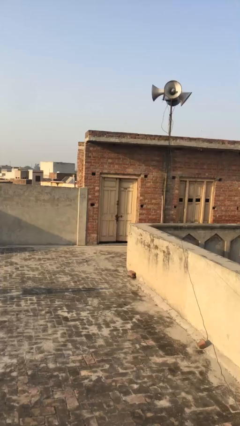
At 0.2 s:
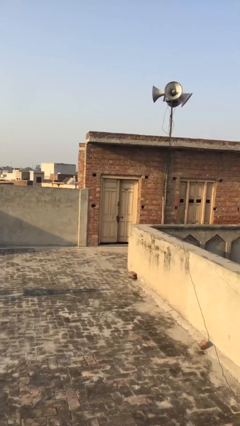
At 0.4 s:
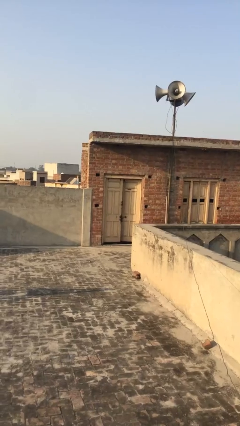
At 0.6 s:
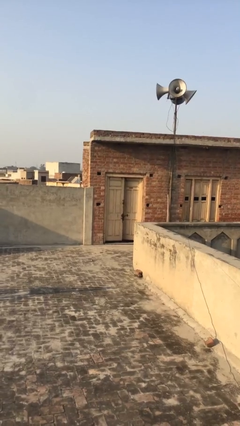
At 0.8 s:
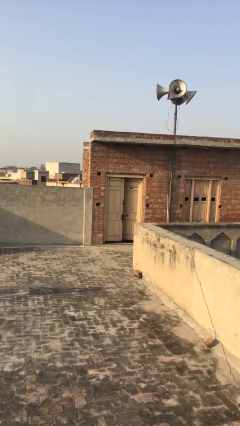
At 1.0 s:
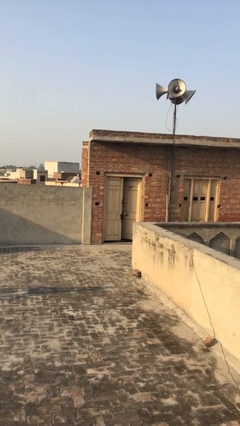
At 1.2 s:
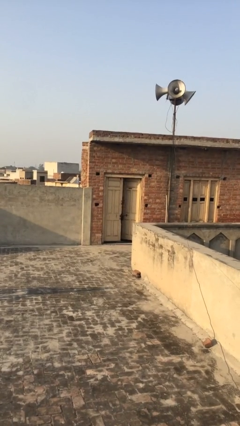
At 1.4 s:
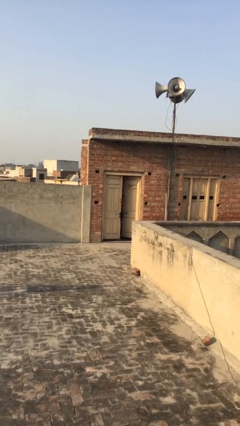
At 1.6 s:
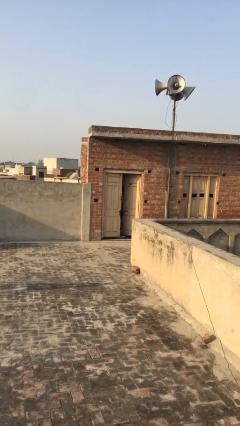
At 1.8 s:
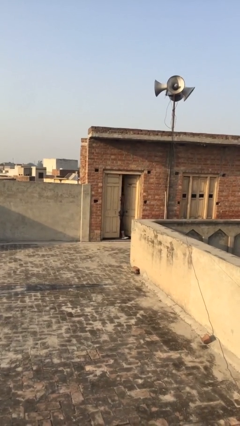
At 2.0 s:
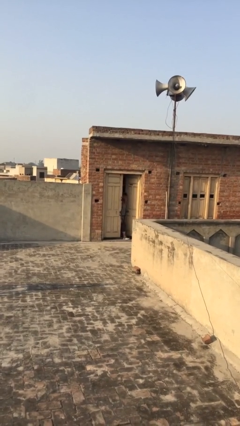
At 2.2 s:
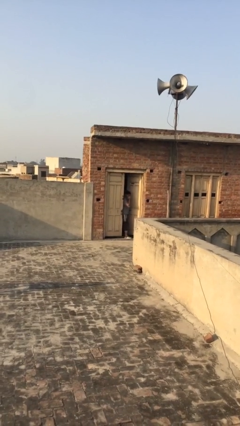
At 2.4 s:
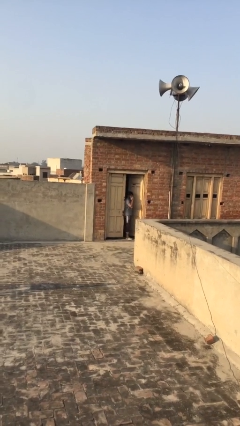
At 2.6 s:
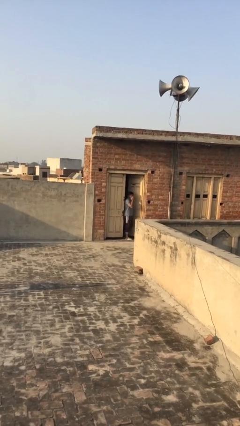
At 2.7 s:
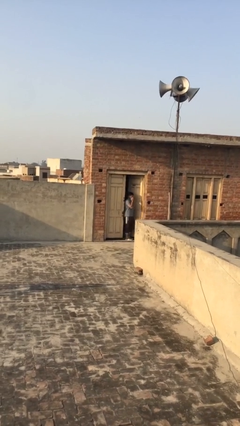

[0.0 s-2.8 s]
person opens facility door

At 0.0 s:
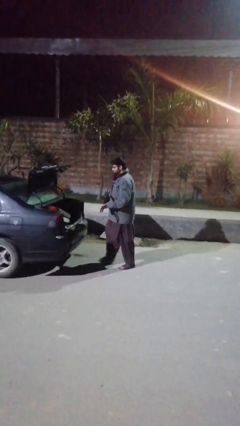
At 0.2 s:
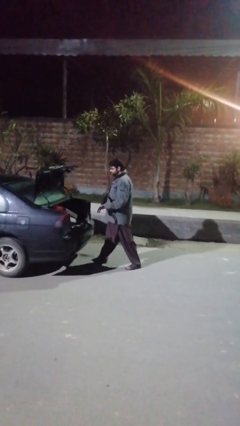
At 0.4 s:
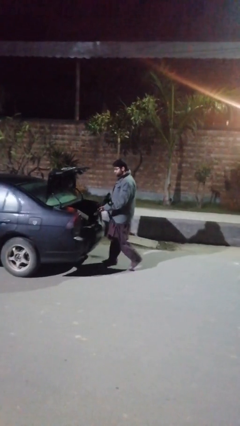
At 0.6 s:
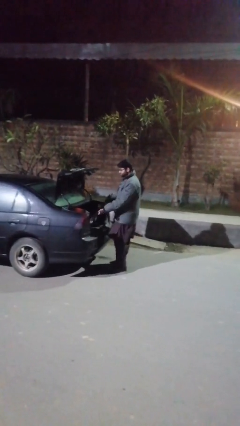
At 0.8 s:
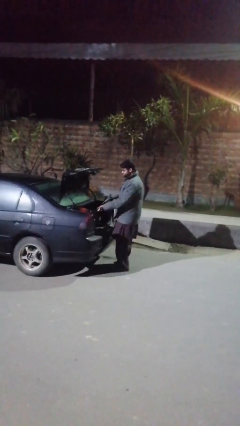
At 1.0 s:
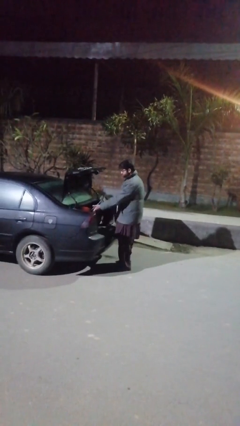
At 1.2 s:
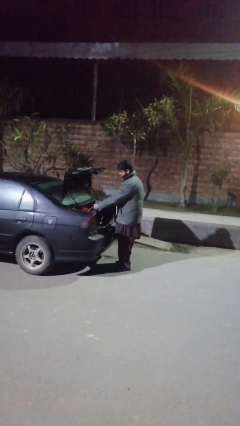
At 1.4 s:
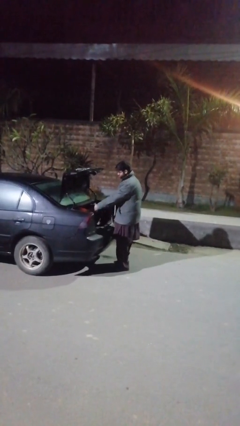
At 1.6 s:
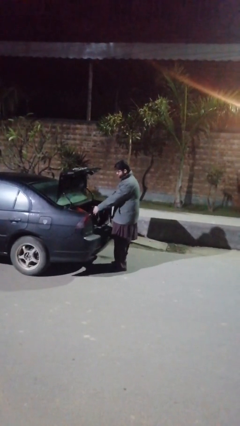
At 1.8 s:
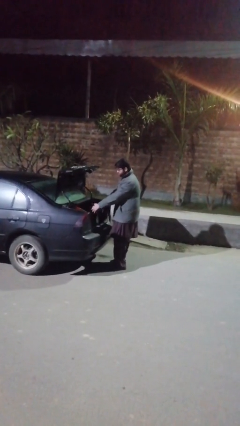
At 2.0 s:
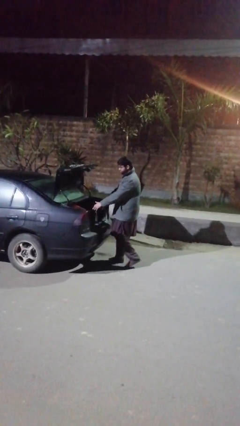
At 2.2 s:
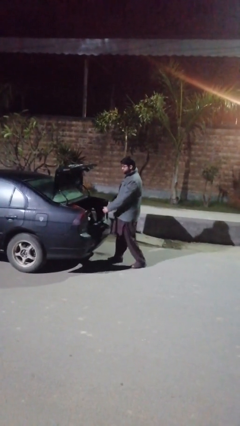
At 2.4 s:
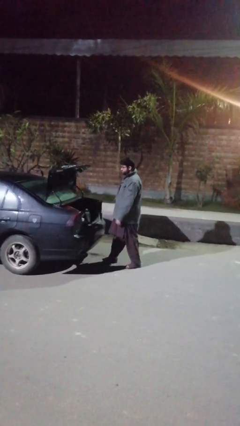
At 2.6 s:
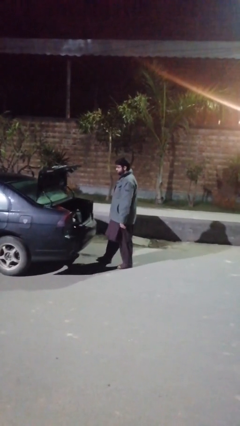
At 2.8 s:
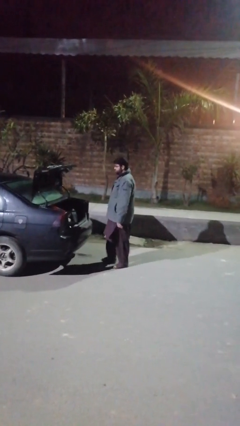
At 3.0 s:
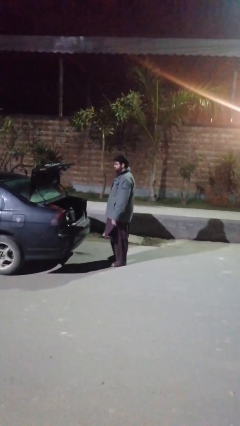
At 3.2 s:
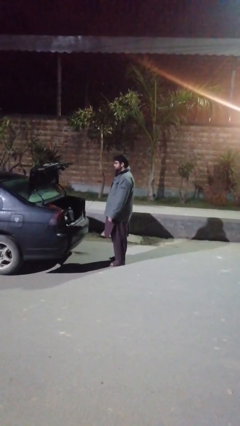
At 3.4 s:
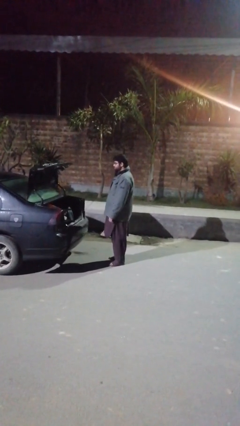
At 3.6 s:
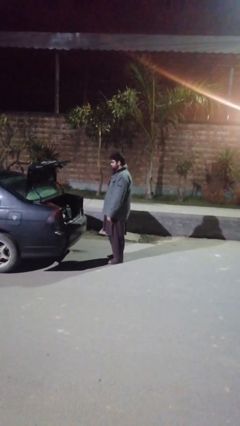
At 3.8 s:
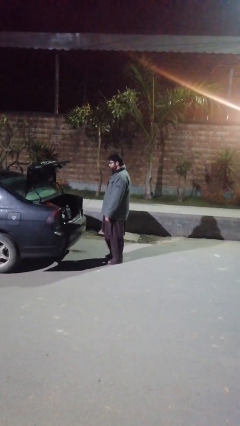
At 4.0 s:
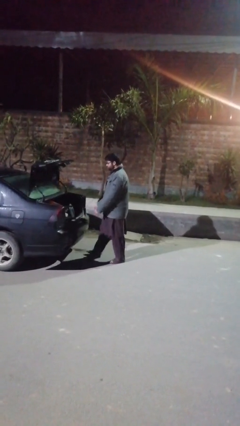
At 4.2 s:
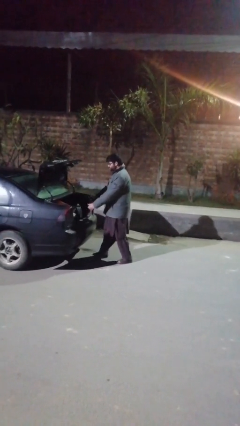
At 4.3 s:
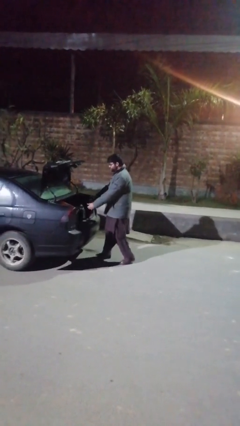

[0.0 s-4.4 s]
person loads car

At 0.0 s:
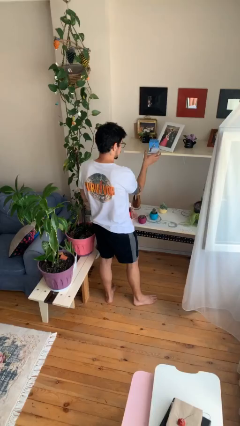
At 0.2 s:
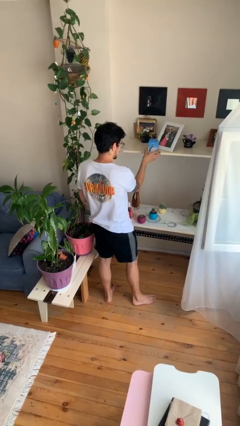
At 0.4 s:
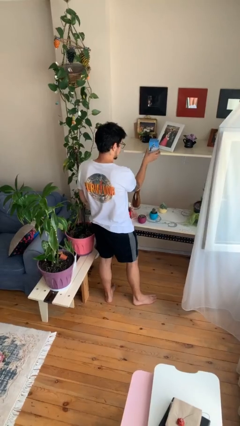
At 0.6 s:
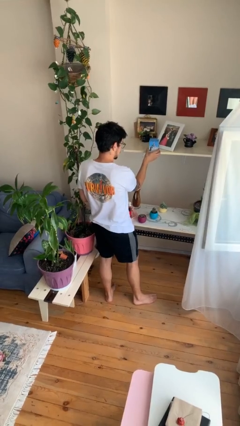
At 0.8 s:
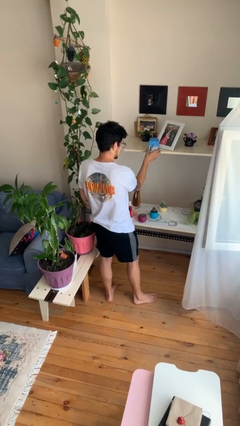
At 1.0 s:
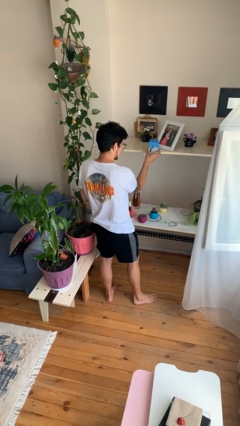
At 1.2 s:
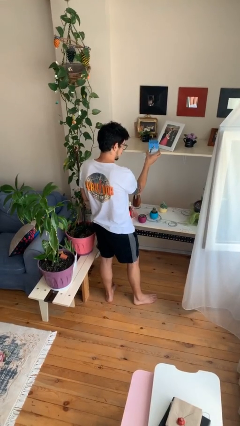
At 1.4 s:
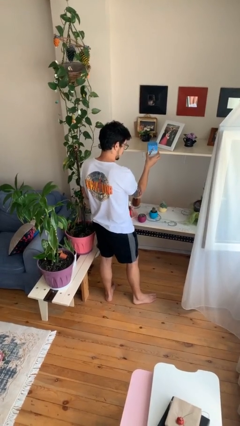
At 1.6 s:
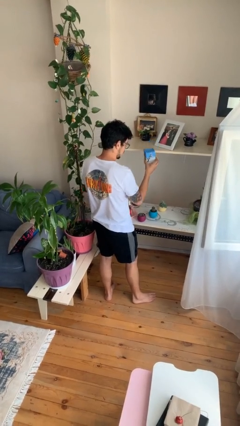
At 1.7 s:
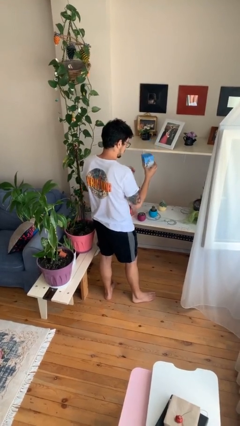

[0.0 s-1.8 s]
person picks up object from shelf

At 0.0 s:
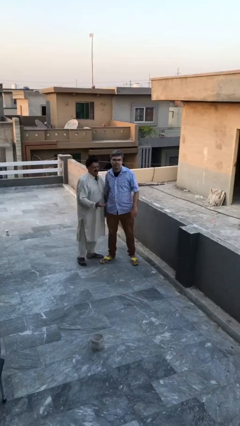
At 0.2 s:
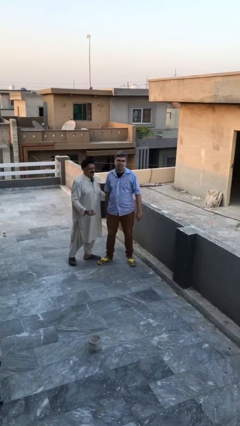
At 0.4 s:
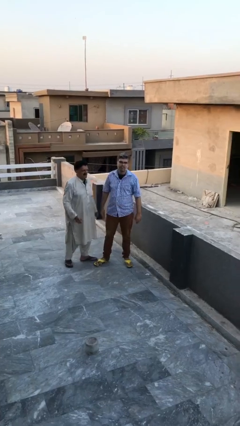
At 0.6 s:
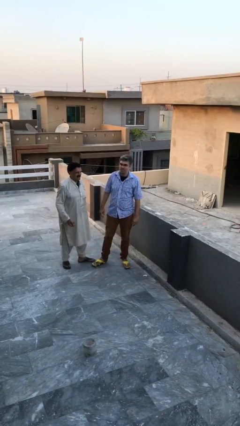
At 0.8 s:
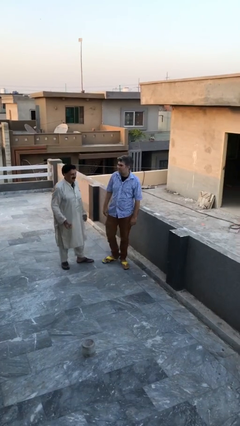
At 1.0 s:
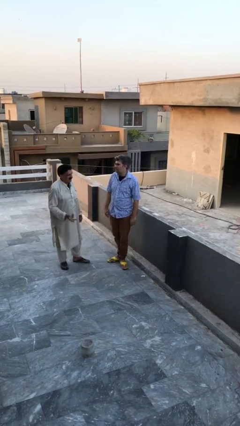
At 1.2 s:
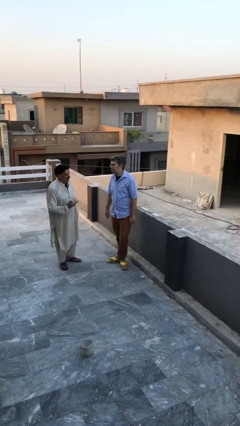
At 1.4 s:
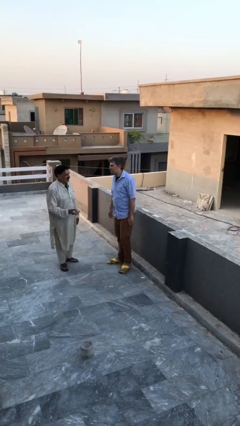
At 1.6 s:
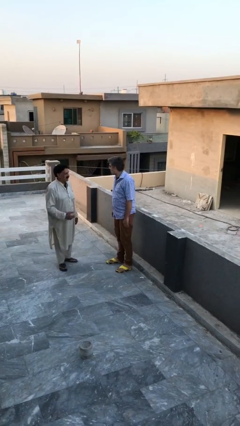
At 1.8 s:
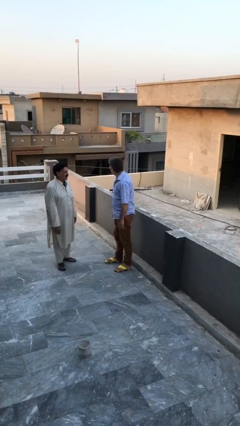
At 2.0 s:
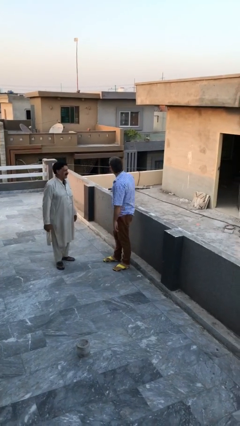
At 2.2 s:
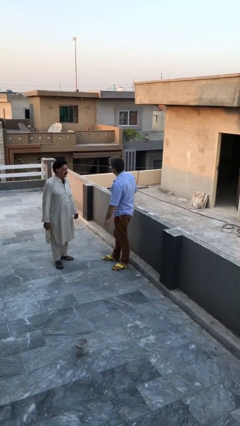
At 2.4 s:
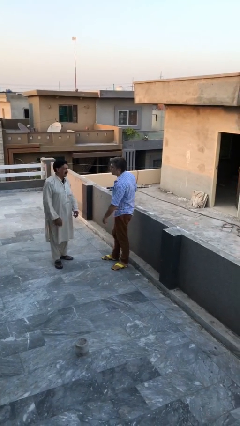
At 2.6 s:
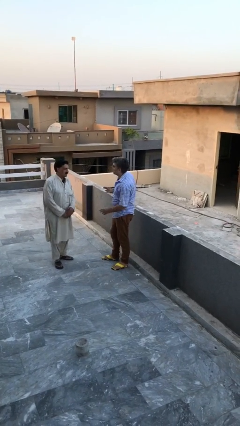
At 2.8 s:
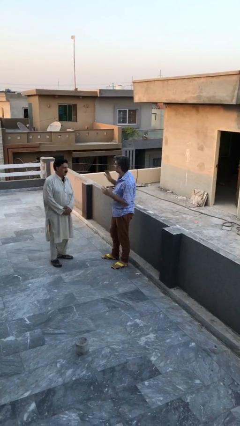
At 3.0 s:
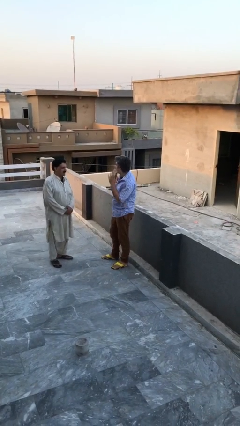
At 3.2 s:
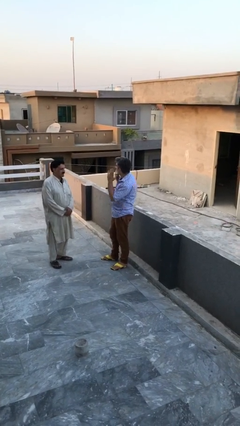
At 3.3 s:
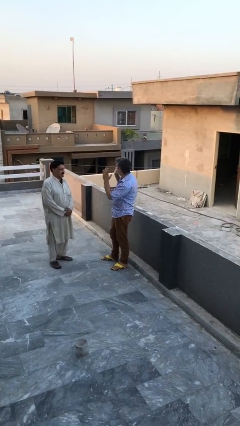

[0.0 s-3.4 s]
person talks to person

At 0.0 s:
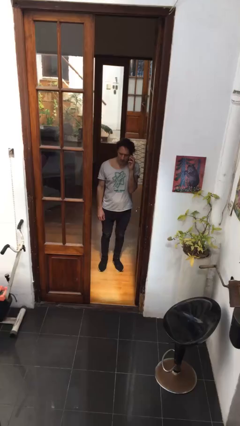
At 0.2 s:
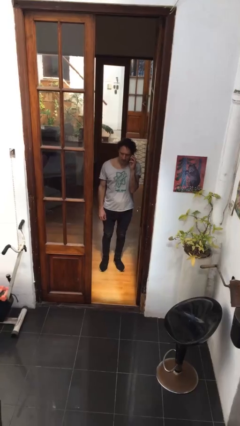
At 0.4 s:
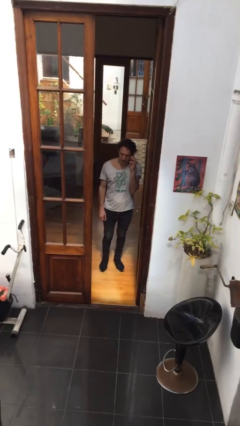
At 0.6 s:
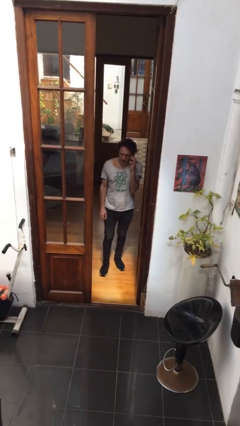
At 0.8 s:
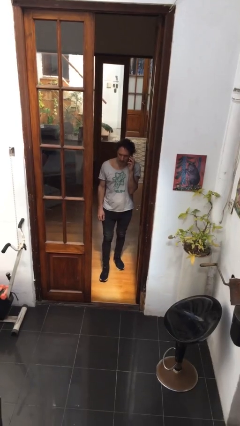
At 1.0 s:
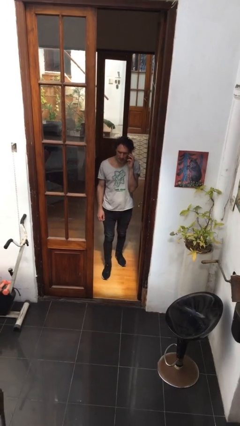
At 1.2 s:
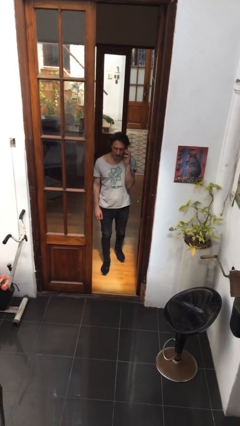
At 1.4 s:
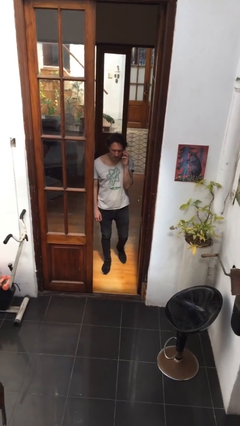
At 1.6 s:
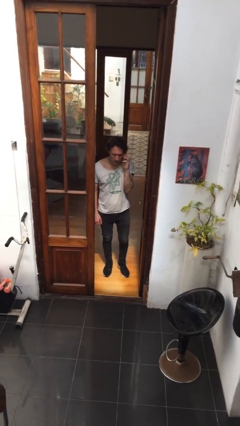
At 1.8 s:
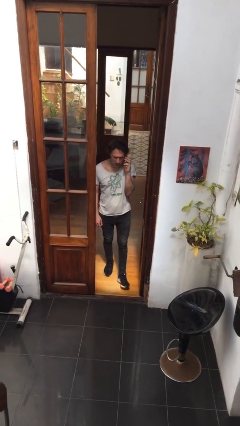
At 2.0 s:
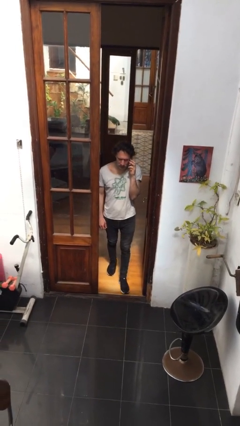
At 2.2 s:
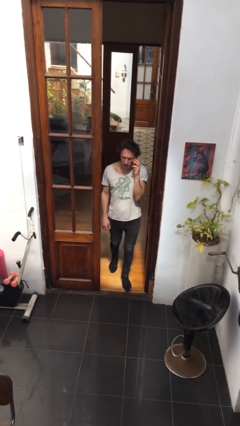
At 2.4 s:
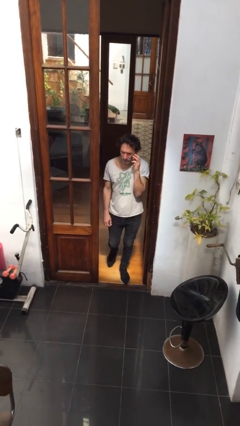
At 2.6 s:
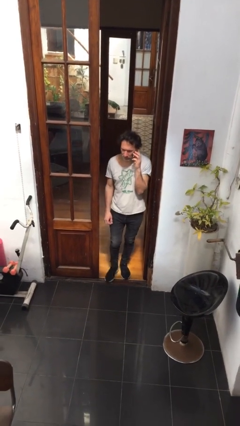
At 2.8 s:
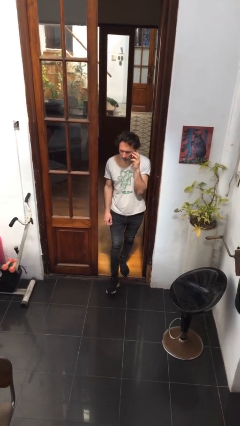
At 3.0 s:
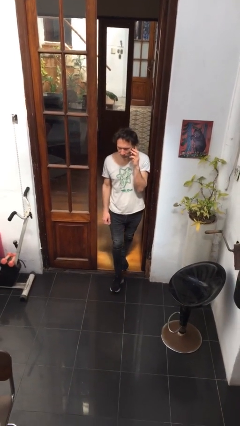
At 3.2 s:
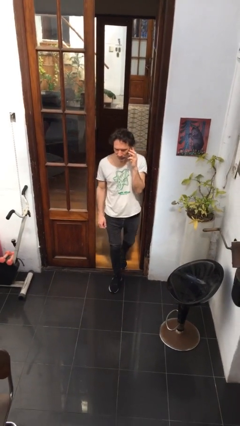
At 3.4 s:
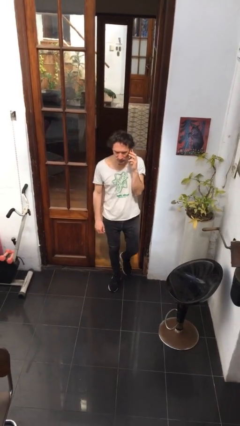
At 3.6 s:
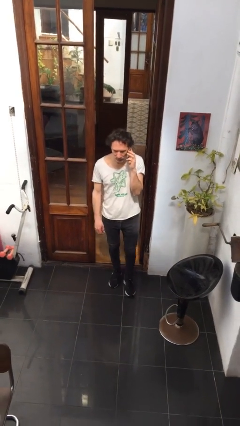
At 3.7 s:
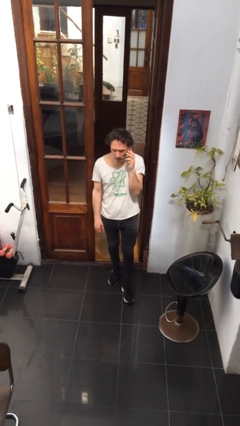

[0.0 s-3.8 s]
person enters scene through structure

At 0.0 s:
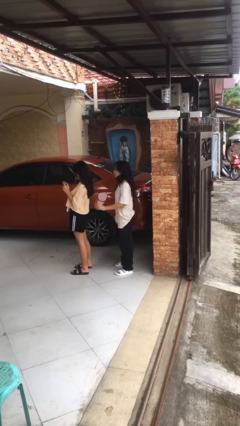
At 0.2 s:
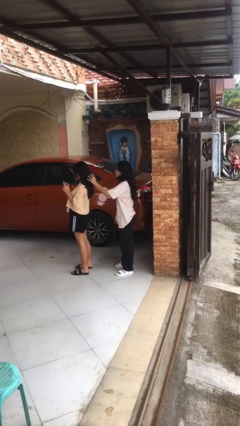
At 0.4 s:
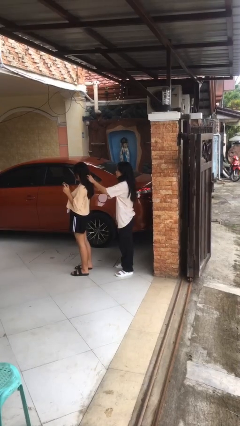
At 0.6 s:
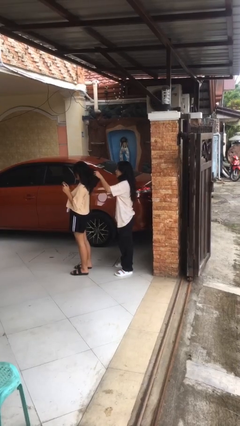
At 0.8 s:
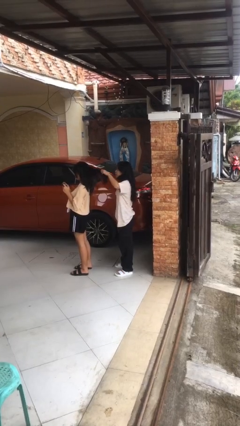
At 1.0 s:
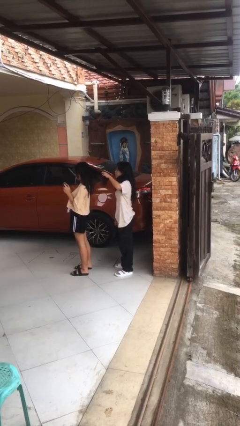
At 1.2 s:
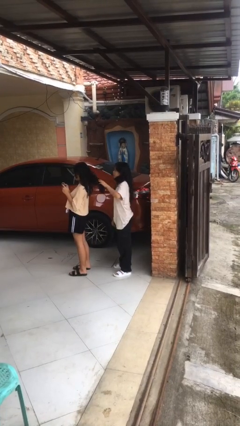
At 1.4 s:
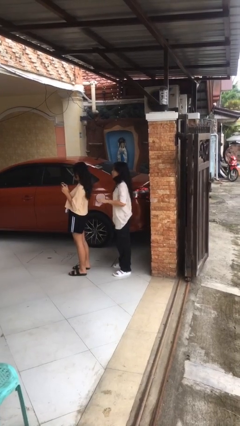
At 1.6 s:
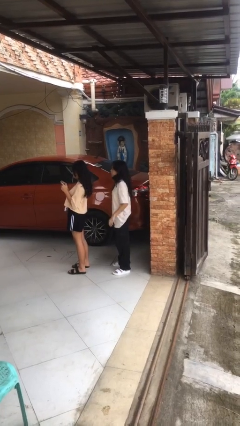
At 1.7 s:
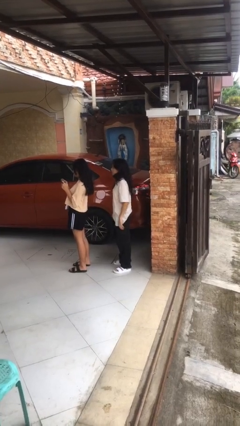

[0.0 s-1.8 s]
person grabs person by hair
